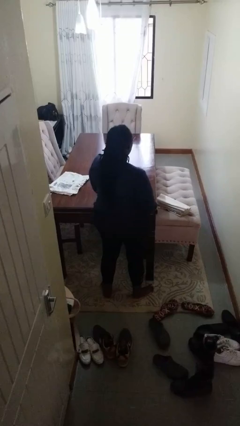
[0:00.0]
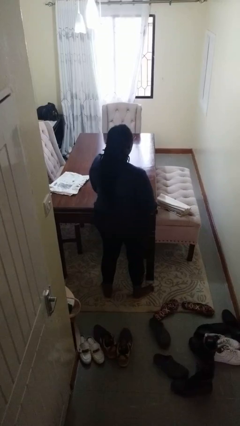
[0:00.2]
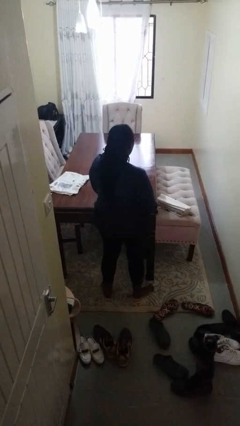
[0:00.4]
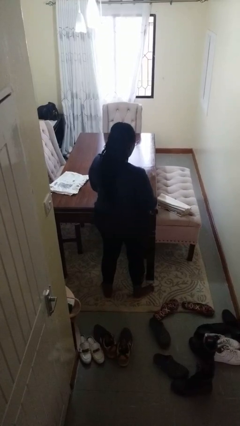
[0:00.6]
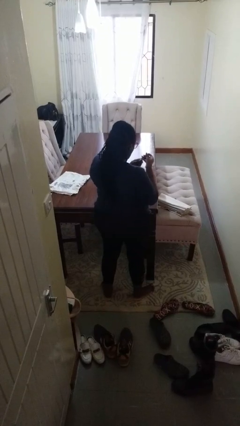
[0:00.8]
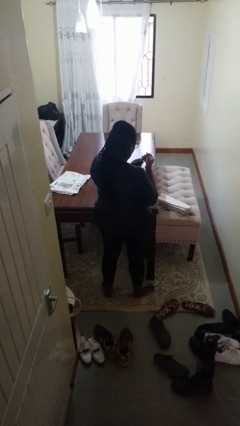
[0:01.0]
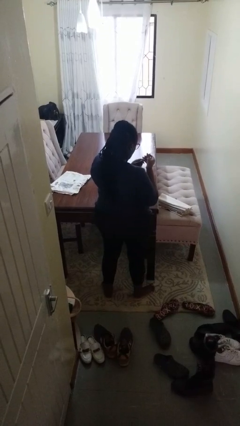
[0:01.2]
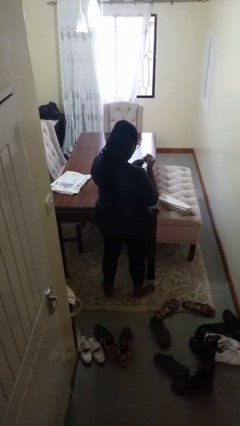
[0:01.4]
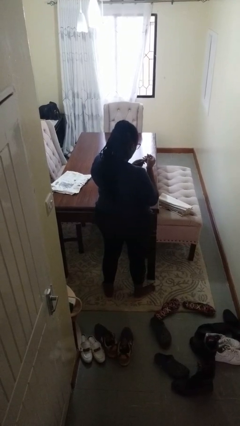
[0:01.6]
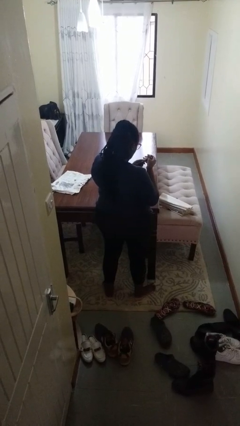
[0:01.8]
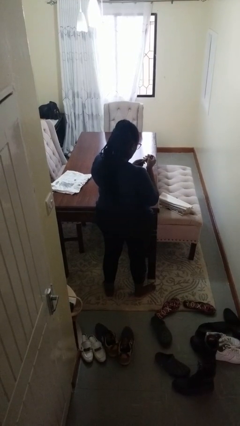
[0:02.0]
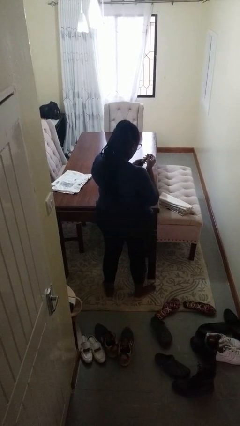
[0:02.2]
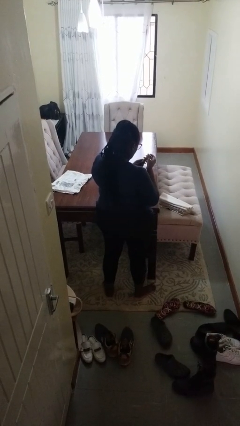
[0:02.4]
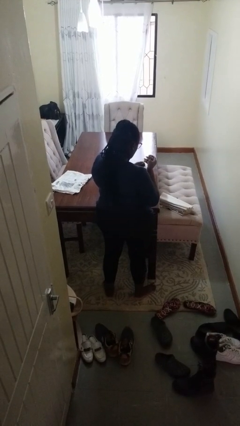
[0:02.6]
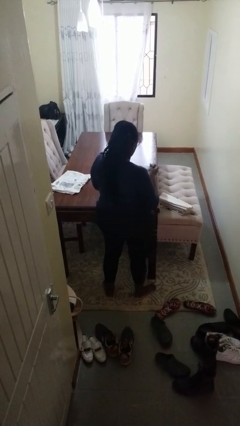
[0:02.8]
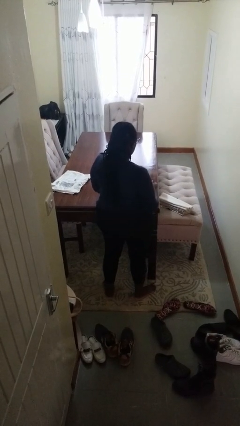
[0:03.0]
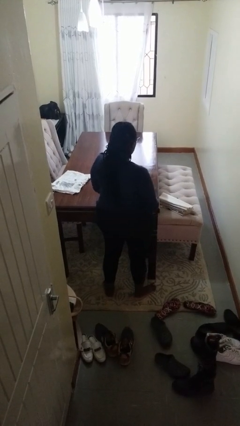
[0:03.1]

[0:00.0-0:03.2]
person clips fingernails

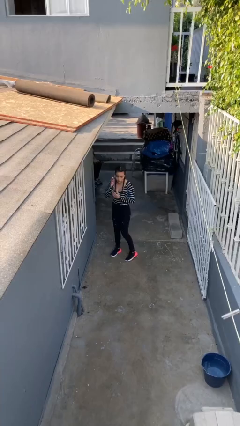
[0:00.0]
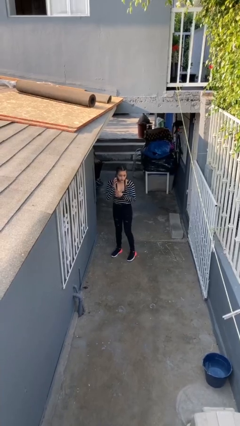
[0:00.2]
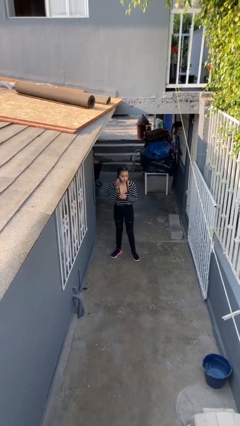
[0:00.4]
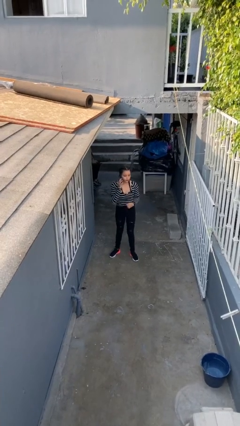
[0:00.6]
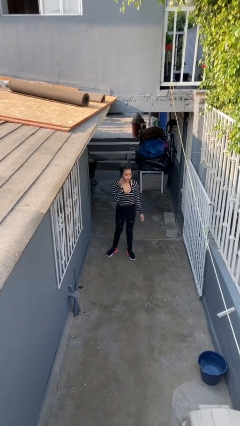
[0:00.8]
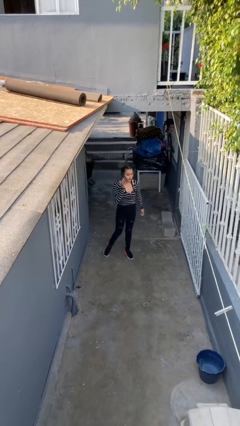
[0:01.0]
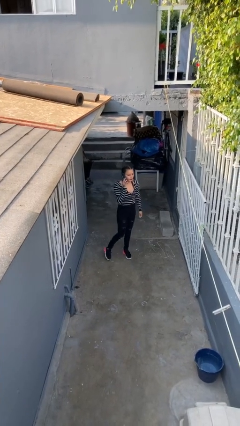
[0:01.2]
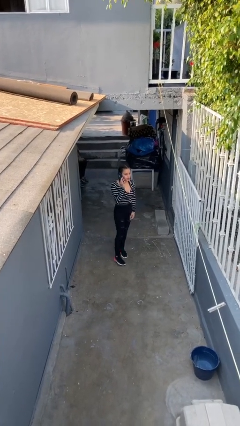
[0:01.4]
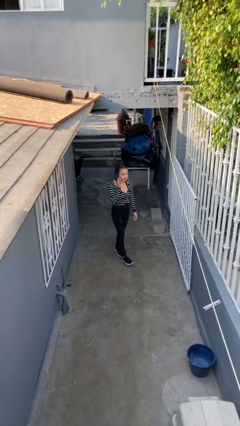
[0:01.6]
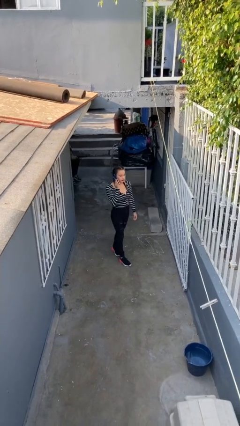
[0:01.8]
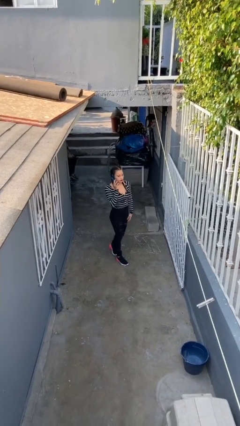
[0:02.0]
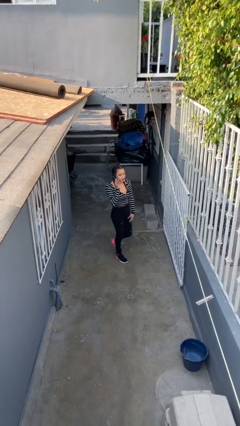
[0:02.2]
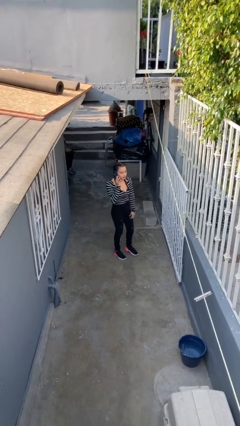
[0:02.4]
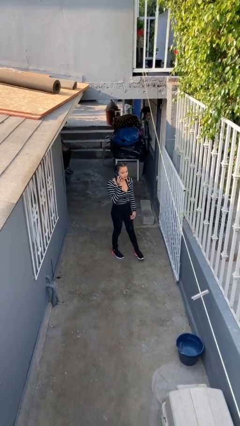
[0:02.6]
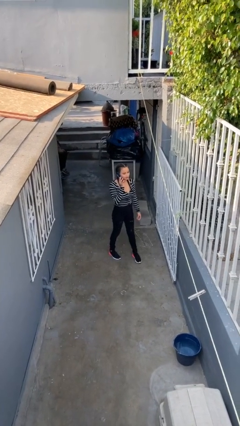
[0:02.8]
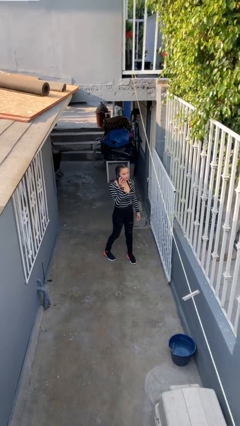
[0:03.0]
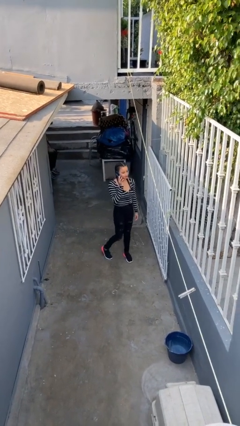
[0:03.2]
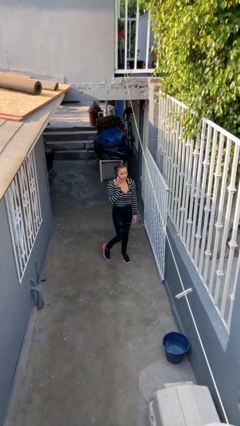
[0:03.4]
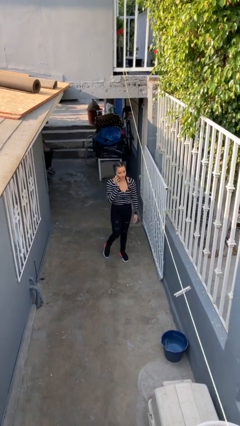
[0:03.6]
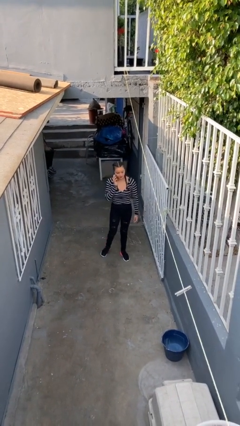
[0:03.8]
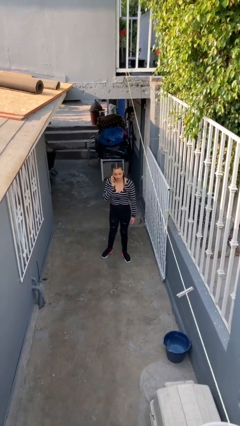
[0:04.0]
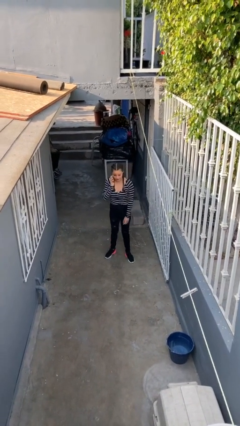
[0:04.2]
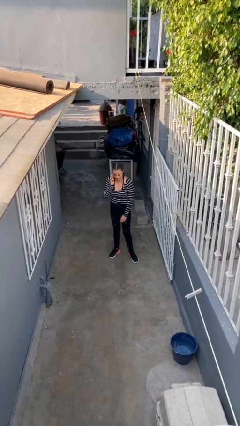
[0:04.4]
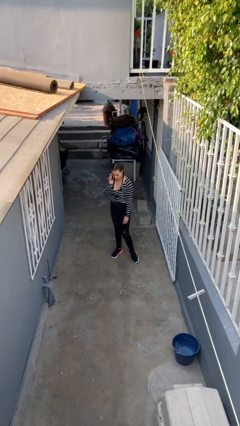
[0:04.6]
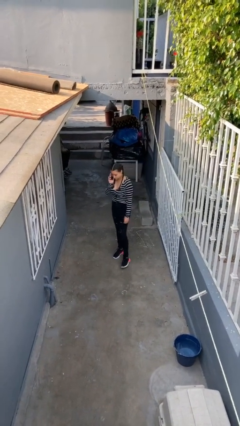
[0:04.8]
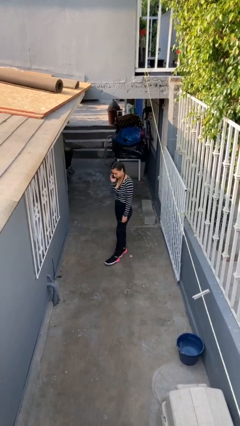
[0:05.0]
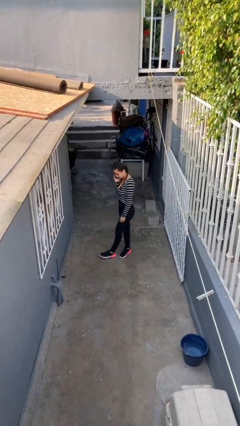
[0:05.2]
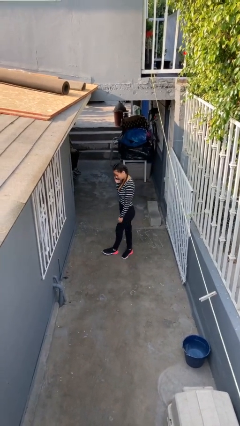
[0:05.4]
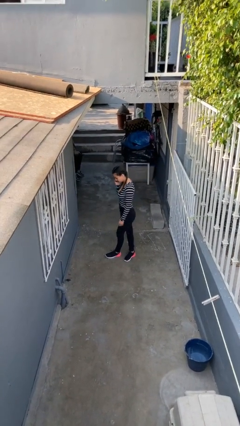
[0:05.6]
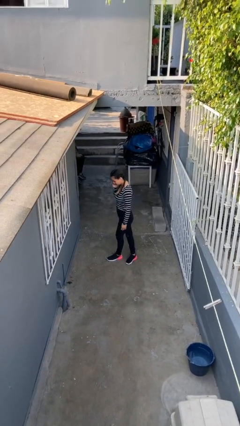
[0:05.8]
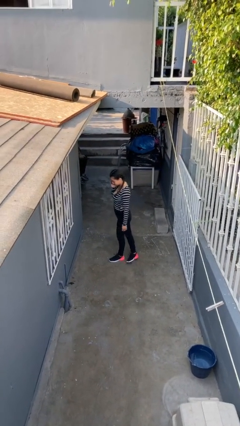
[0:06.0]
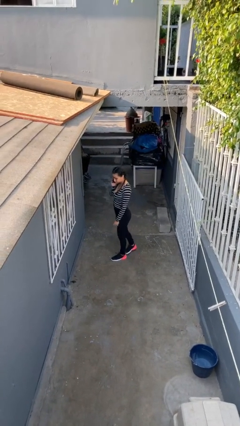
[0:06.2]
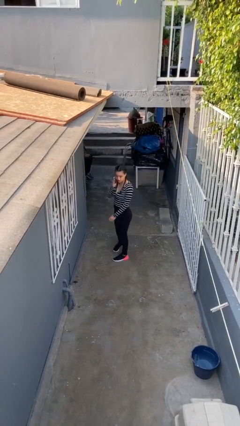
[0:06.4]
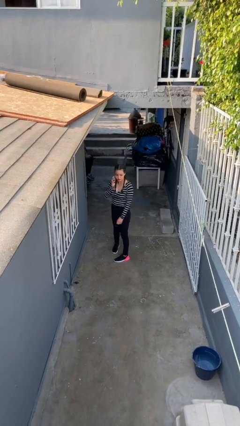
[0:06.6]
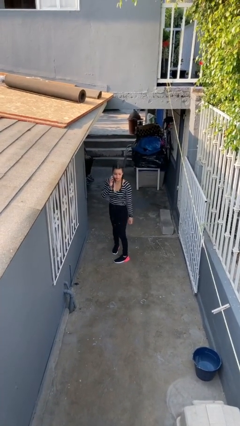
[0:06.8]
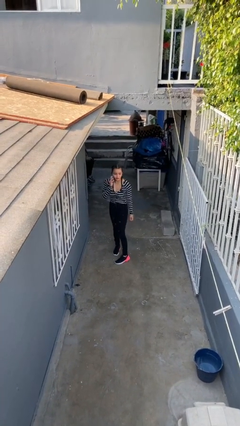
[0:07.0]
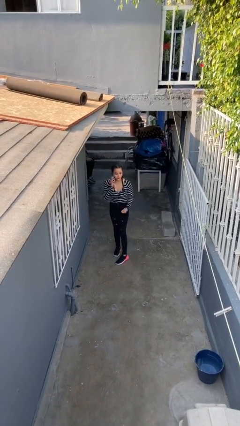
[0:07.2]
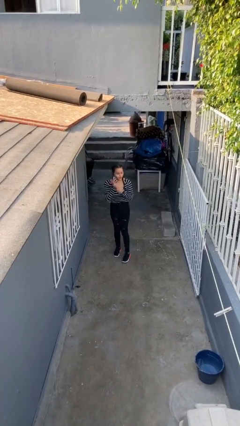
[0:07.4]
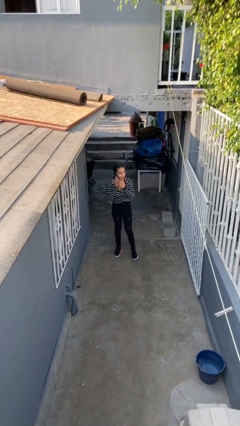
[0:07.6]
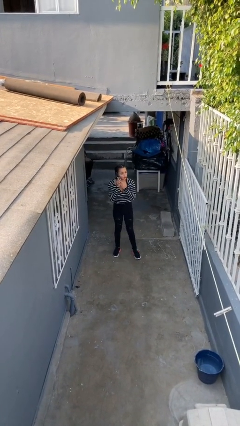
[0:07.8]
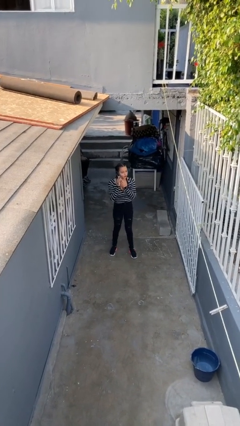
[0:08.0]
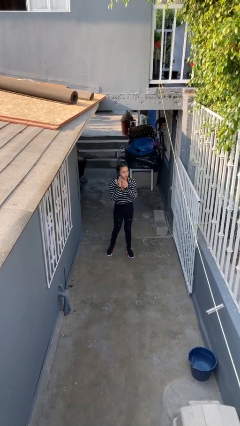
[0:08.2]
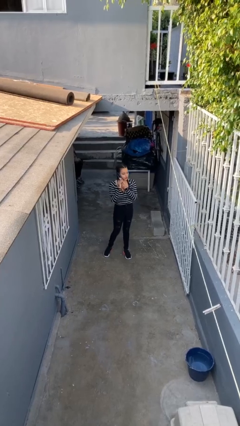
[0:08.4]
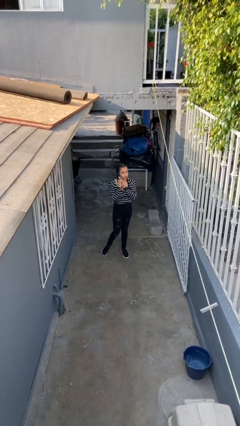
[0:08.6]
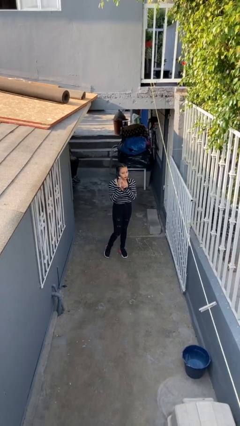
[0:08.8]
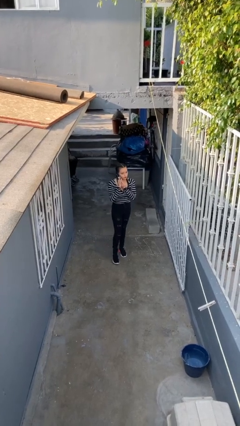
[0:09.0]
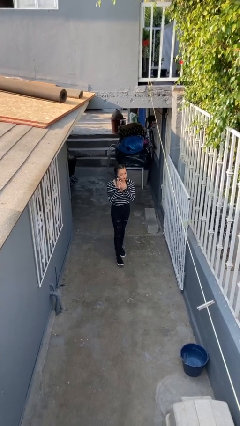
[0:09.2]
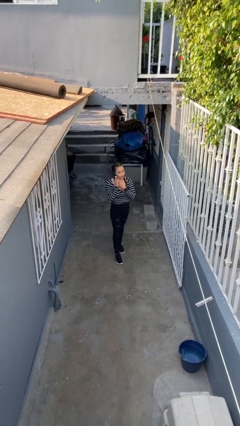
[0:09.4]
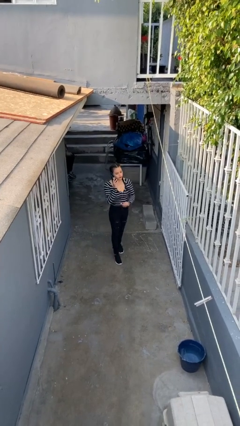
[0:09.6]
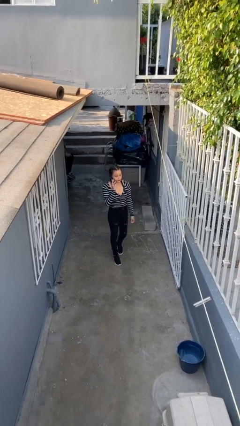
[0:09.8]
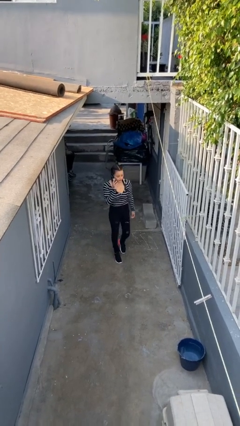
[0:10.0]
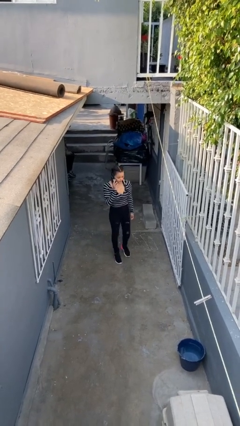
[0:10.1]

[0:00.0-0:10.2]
person talks on phone

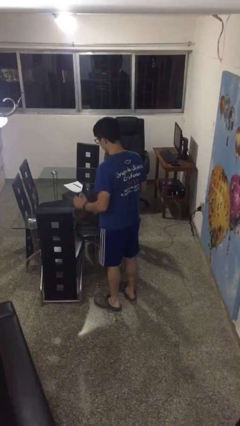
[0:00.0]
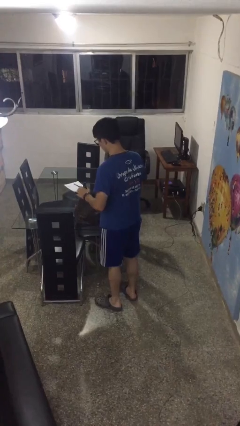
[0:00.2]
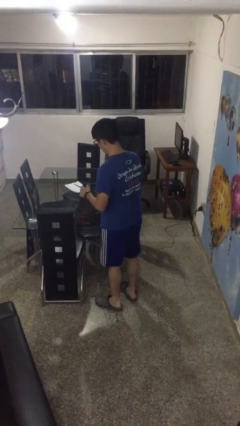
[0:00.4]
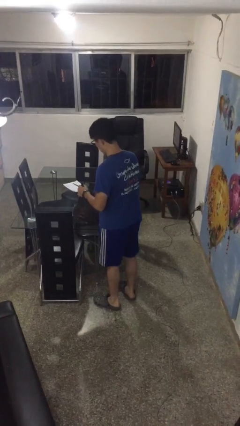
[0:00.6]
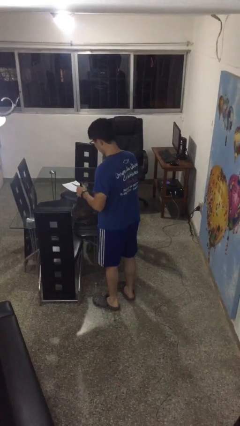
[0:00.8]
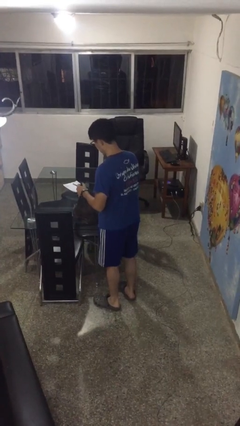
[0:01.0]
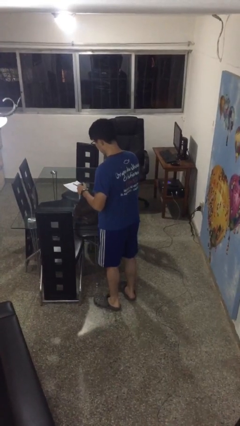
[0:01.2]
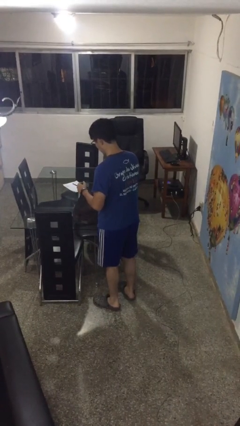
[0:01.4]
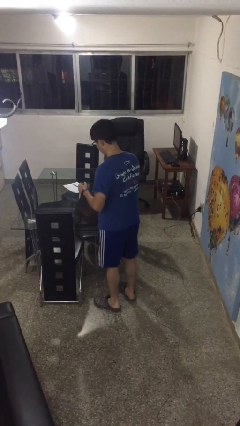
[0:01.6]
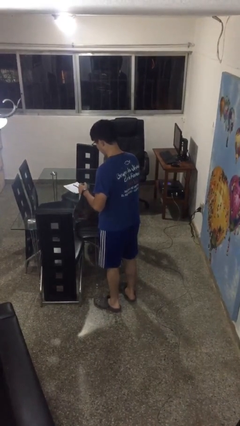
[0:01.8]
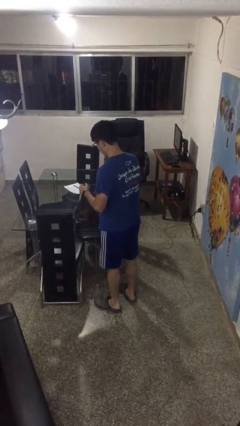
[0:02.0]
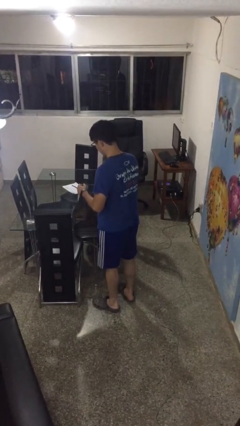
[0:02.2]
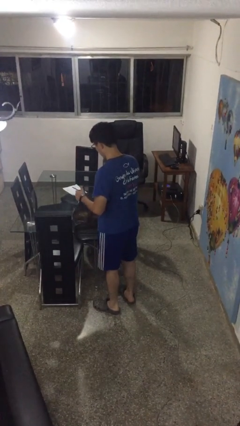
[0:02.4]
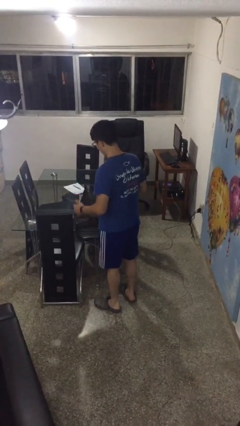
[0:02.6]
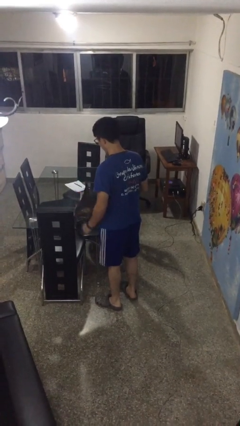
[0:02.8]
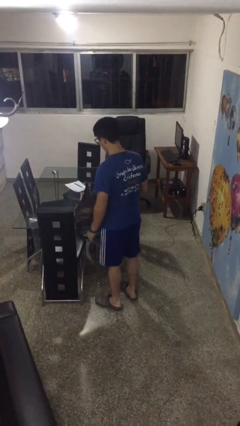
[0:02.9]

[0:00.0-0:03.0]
person searches in bag

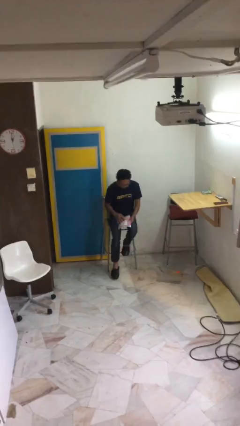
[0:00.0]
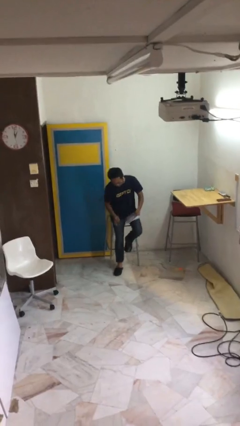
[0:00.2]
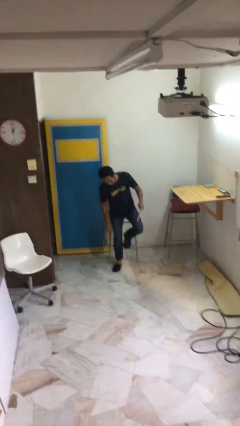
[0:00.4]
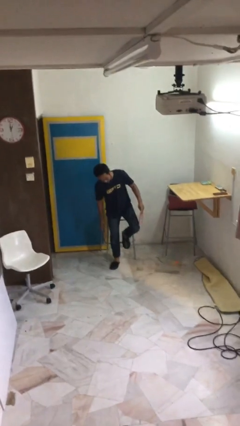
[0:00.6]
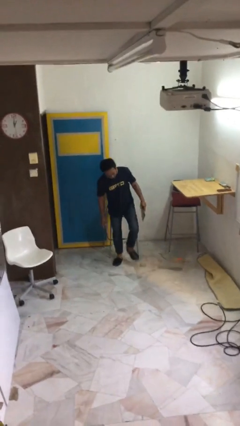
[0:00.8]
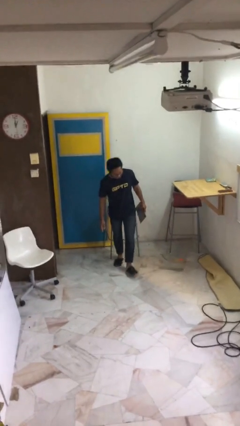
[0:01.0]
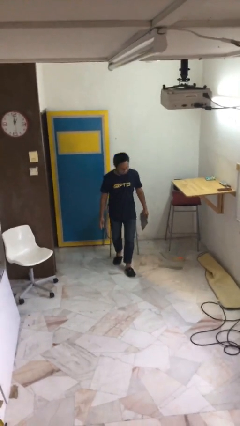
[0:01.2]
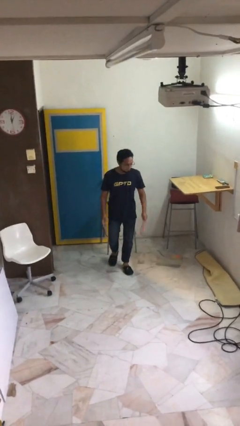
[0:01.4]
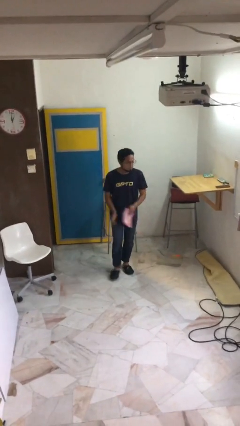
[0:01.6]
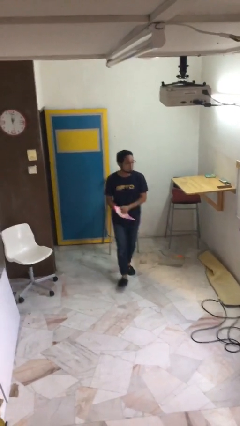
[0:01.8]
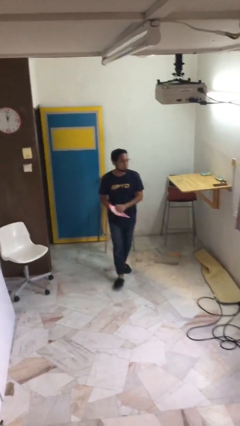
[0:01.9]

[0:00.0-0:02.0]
person stands up
